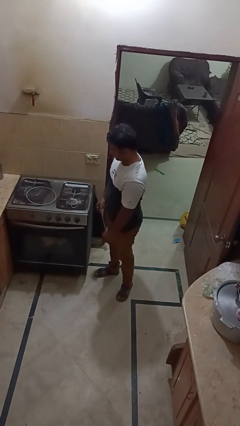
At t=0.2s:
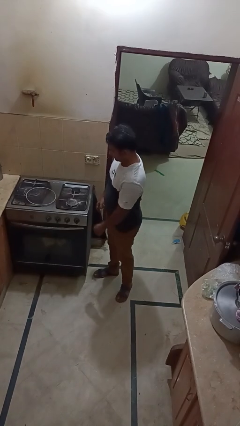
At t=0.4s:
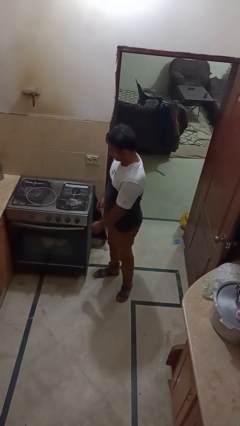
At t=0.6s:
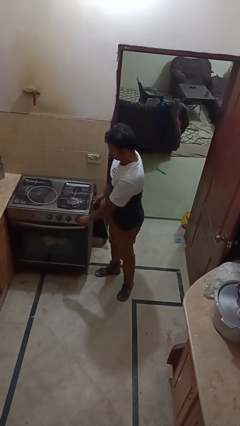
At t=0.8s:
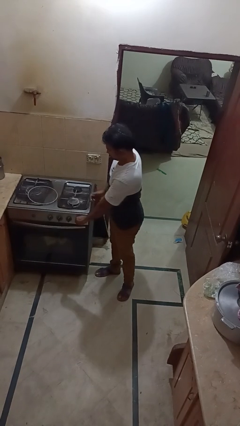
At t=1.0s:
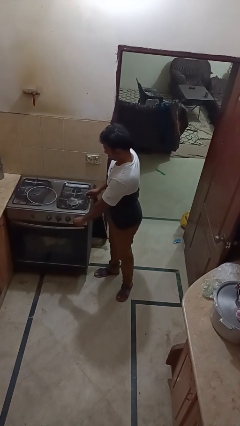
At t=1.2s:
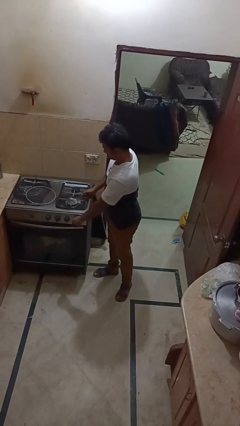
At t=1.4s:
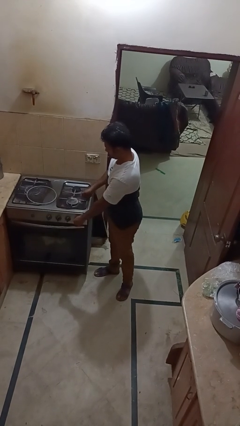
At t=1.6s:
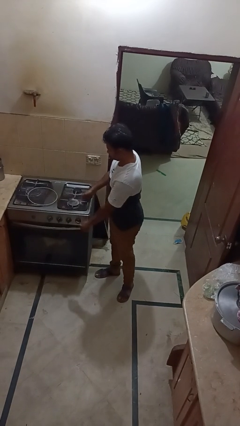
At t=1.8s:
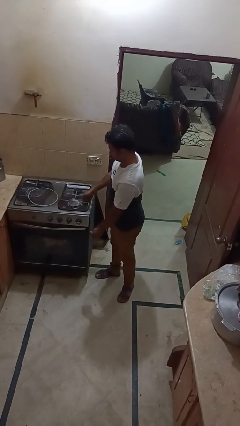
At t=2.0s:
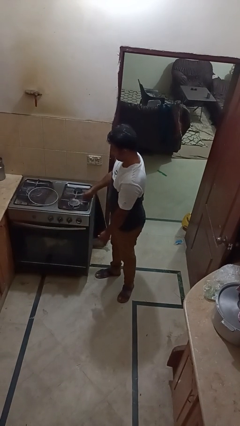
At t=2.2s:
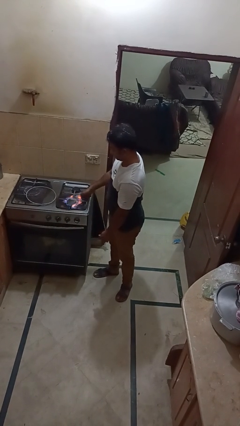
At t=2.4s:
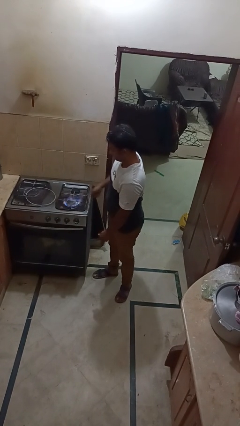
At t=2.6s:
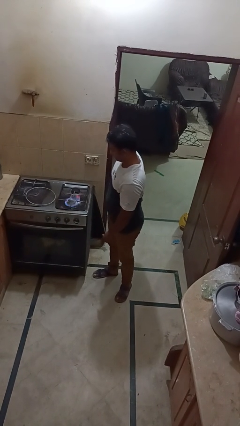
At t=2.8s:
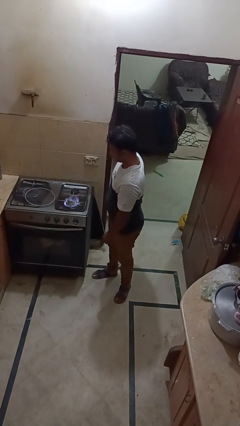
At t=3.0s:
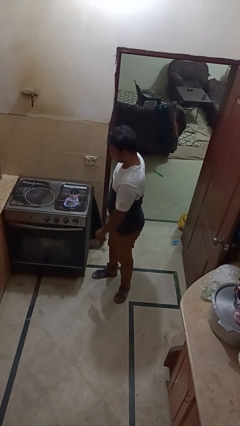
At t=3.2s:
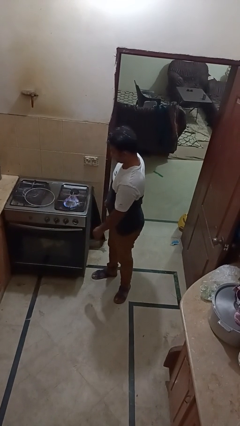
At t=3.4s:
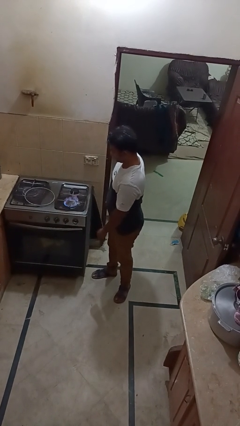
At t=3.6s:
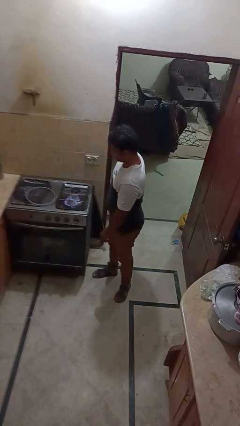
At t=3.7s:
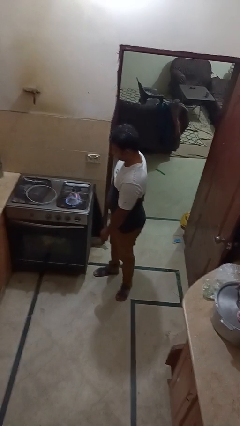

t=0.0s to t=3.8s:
person turns on stovetop

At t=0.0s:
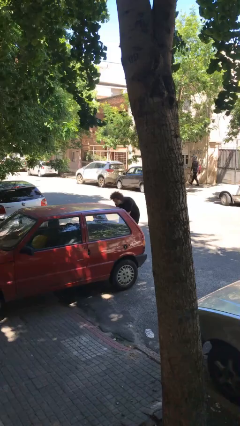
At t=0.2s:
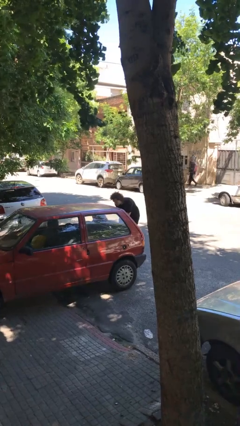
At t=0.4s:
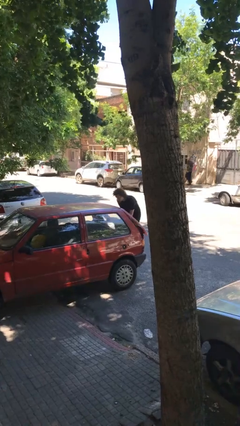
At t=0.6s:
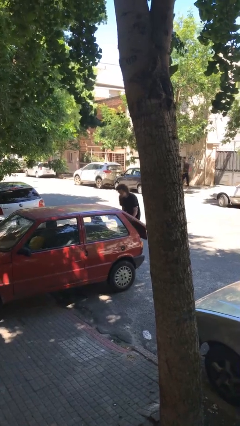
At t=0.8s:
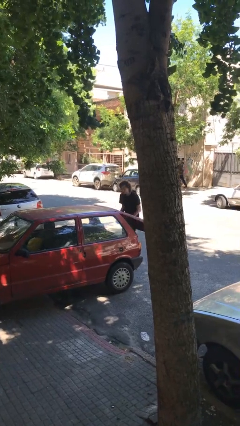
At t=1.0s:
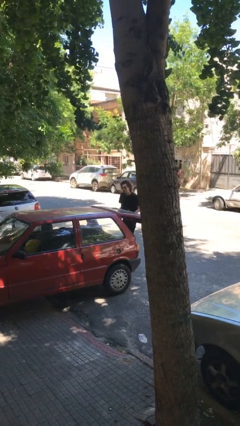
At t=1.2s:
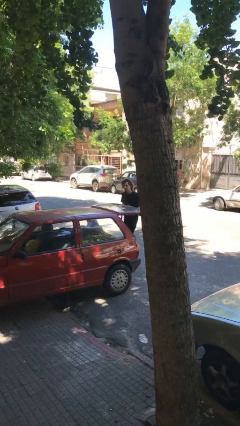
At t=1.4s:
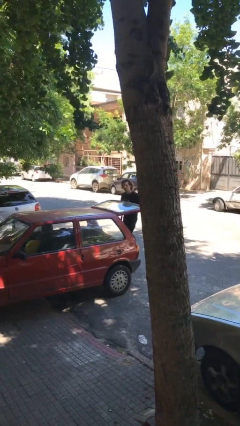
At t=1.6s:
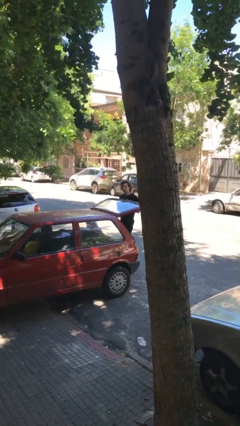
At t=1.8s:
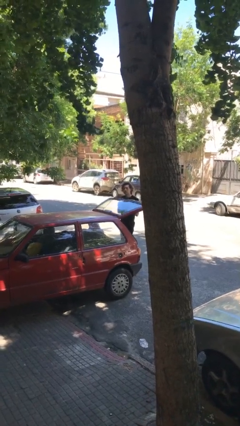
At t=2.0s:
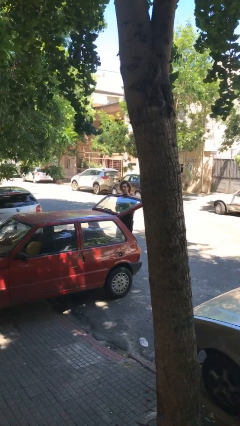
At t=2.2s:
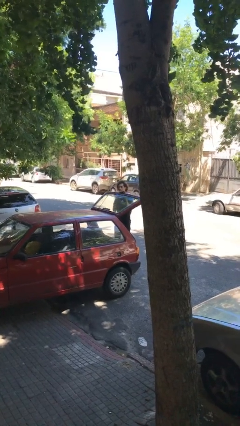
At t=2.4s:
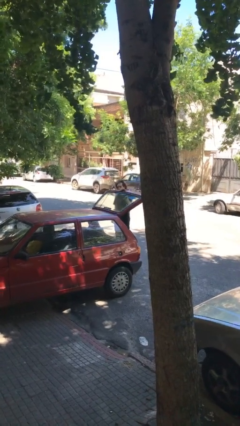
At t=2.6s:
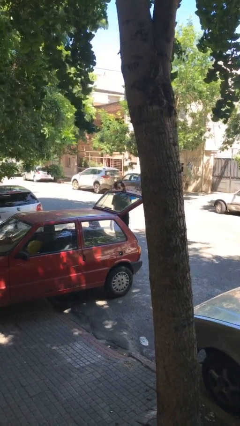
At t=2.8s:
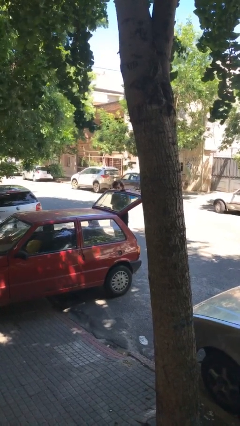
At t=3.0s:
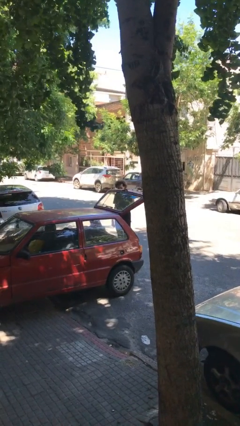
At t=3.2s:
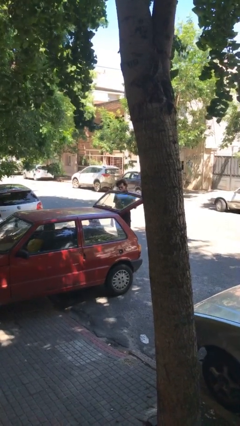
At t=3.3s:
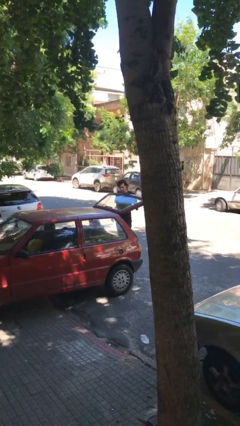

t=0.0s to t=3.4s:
person opens car trunk

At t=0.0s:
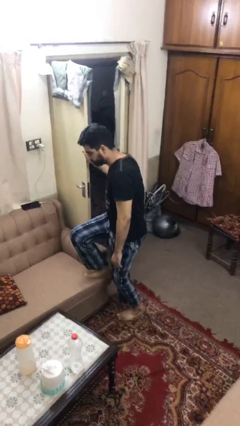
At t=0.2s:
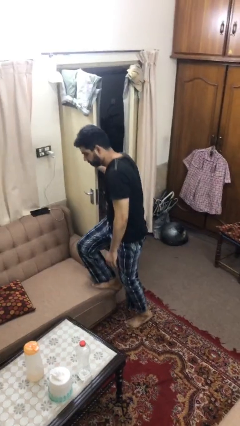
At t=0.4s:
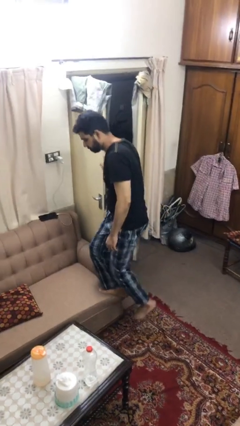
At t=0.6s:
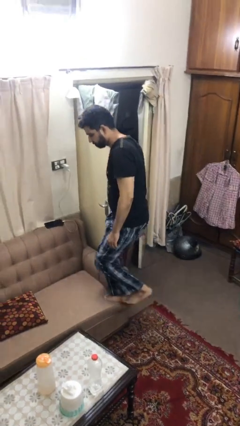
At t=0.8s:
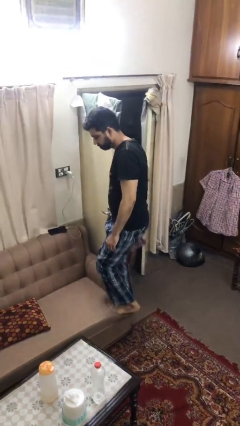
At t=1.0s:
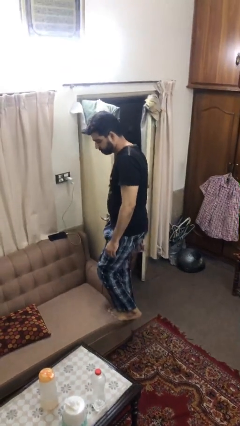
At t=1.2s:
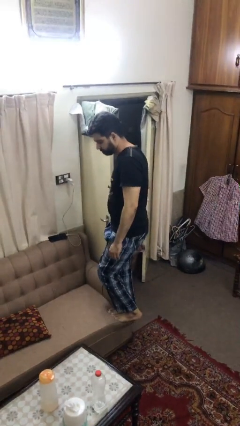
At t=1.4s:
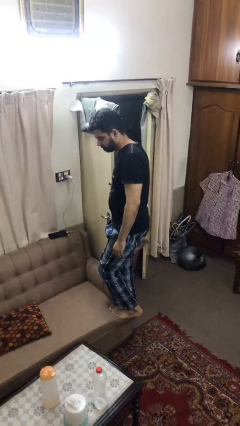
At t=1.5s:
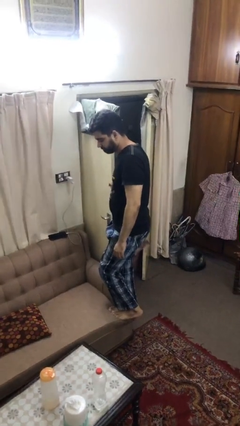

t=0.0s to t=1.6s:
person climbs on couch

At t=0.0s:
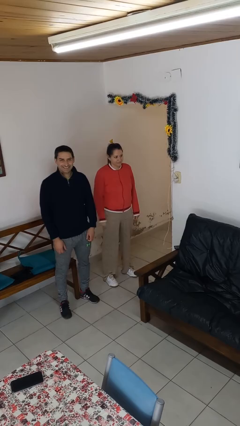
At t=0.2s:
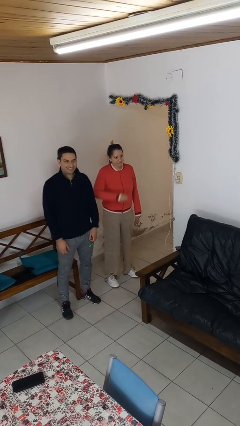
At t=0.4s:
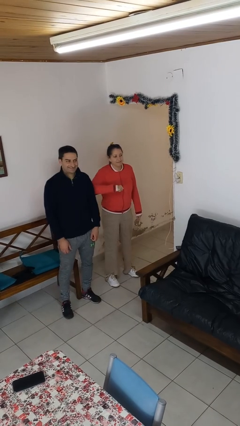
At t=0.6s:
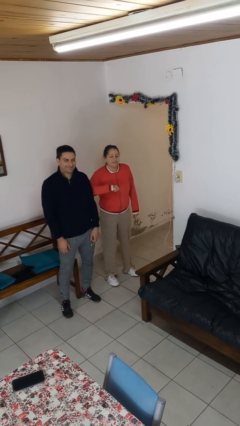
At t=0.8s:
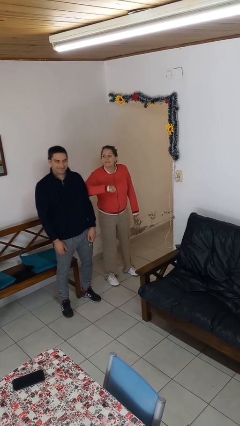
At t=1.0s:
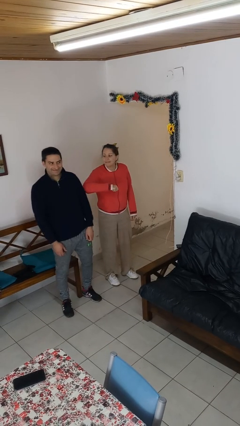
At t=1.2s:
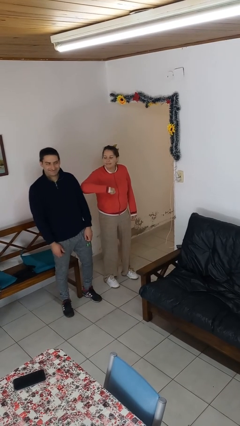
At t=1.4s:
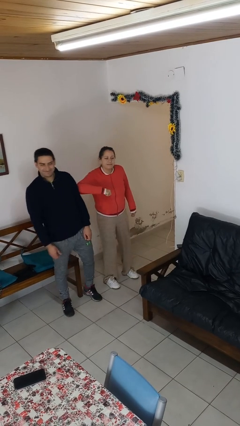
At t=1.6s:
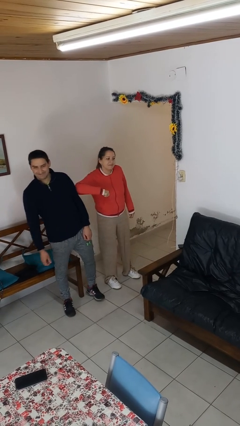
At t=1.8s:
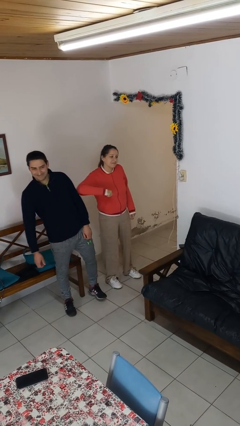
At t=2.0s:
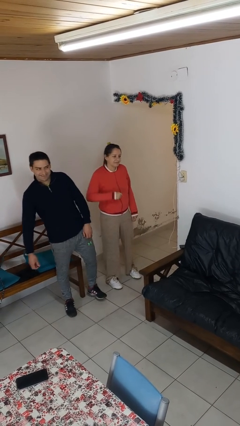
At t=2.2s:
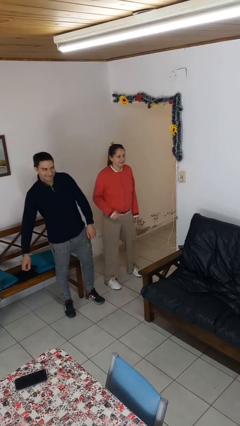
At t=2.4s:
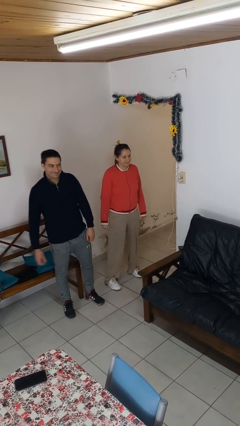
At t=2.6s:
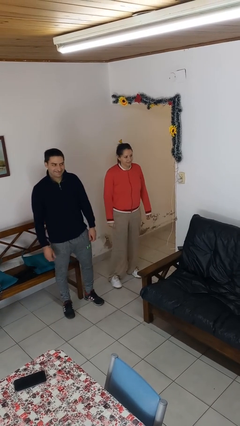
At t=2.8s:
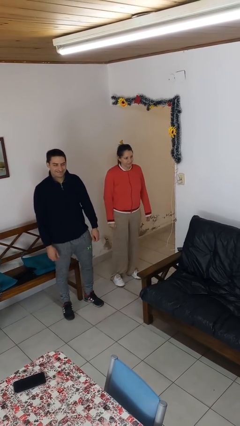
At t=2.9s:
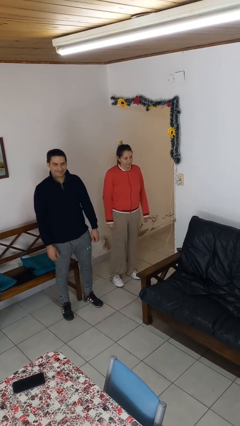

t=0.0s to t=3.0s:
person nudges person with elbow

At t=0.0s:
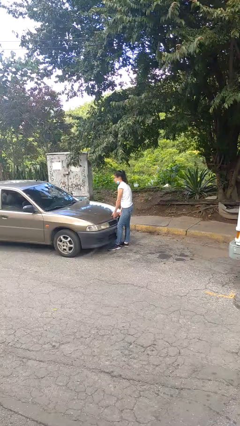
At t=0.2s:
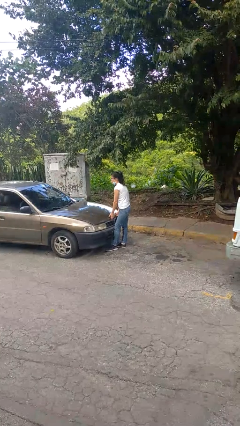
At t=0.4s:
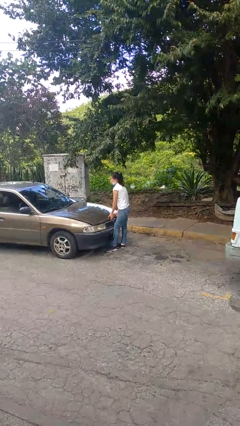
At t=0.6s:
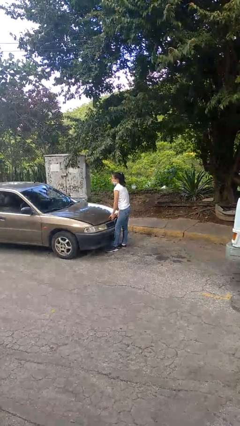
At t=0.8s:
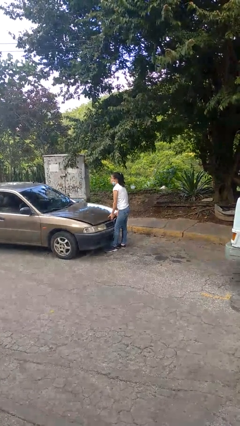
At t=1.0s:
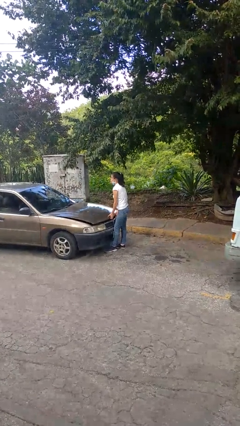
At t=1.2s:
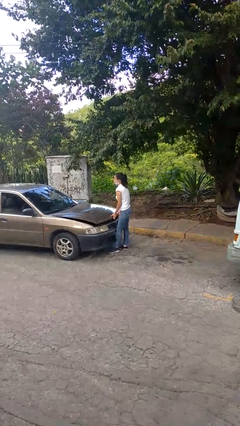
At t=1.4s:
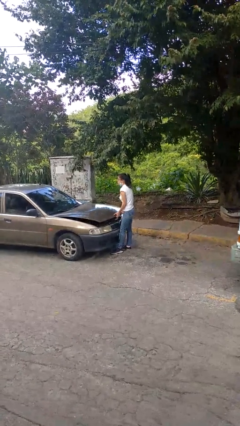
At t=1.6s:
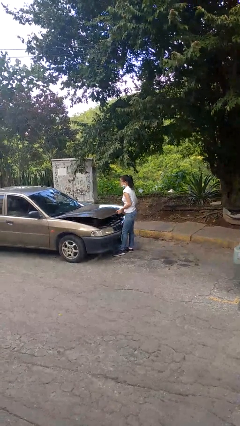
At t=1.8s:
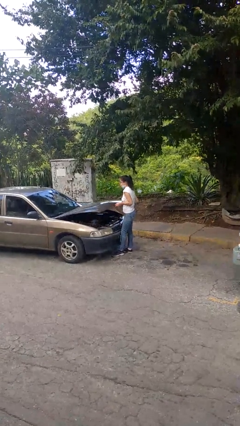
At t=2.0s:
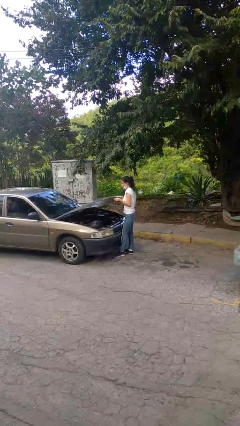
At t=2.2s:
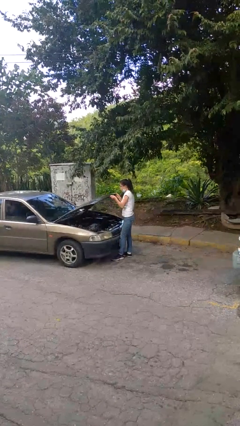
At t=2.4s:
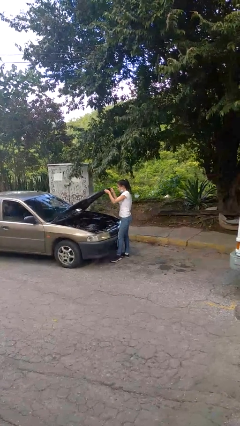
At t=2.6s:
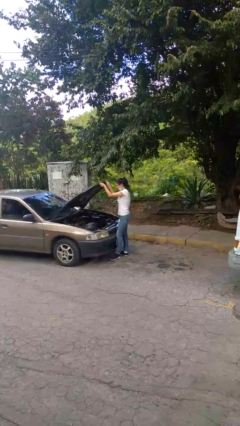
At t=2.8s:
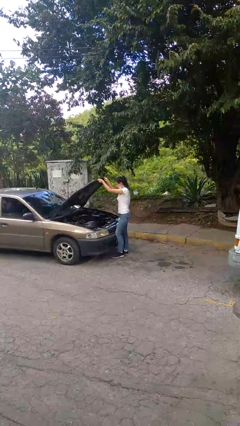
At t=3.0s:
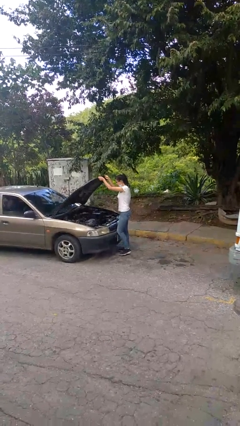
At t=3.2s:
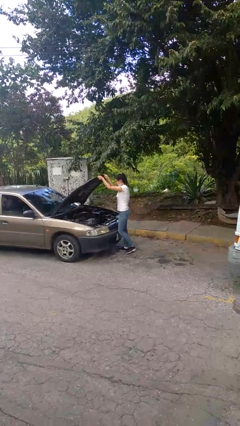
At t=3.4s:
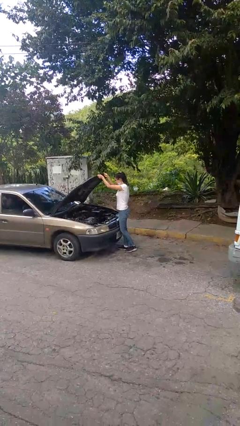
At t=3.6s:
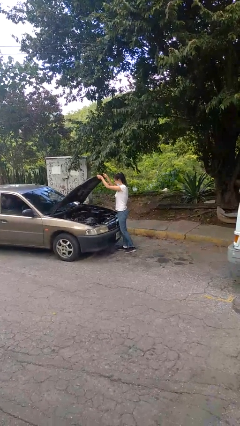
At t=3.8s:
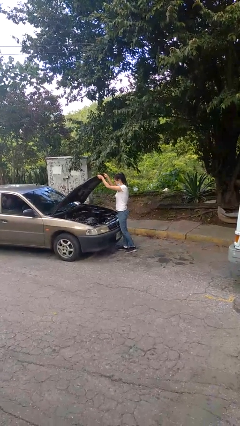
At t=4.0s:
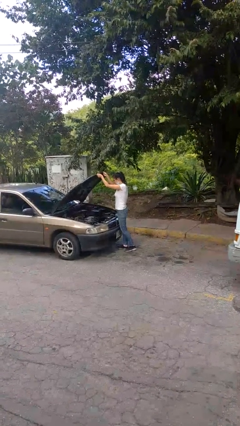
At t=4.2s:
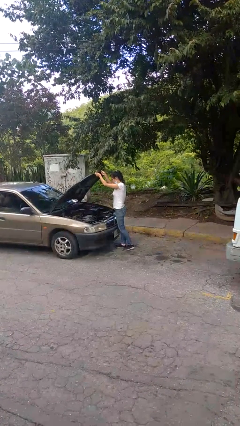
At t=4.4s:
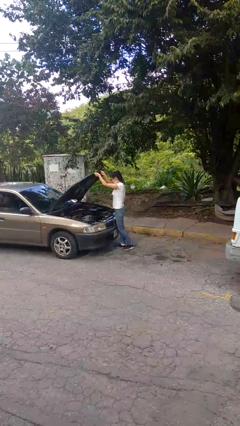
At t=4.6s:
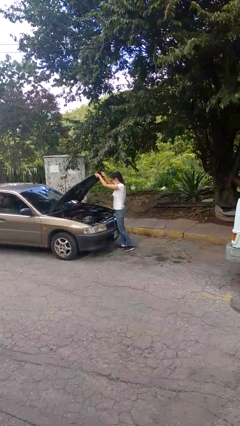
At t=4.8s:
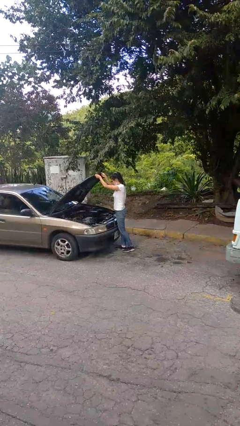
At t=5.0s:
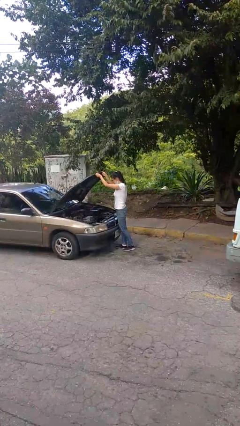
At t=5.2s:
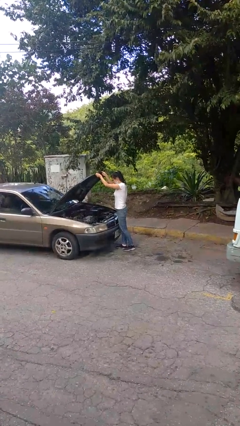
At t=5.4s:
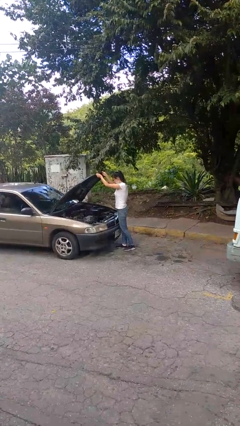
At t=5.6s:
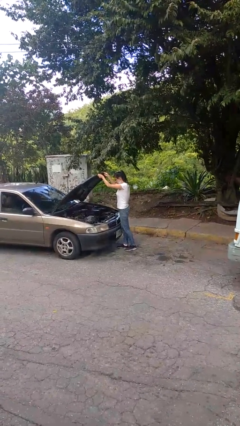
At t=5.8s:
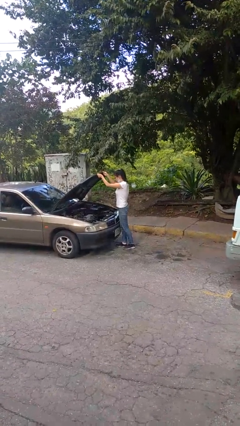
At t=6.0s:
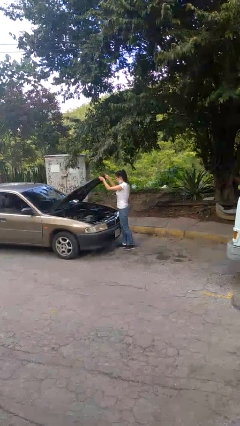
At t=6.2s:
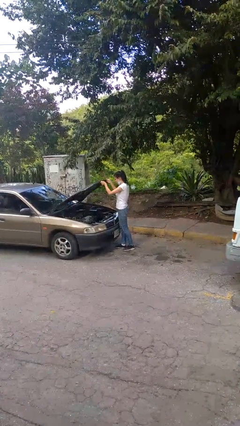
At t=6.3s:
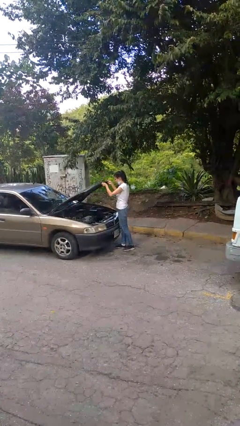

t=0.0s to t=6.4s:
person opens car hood
